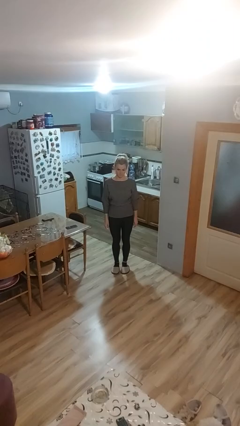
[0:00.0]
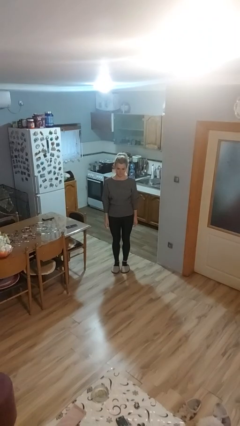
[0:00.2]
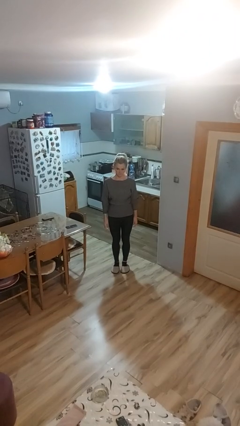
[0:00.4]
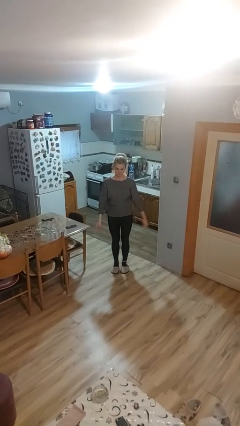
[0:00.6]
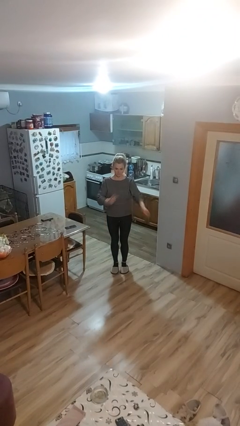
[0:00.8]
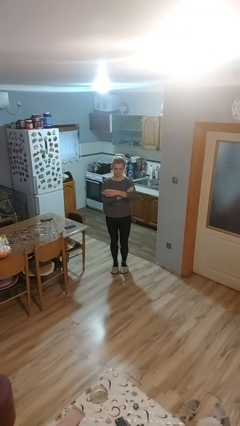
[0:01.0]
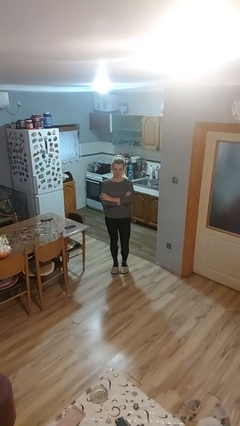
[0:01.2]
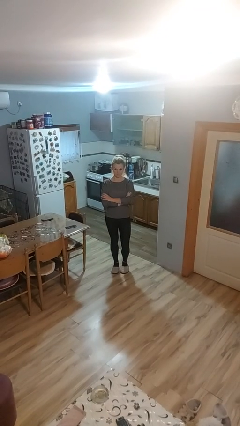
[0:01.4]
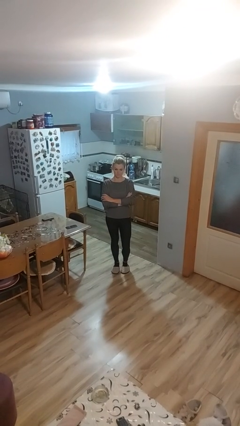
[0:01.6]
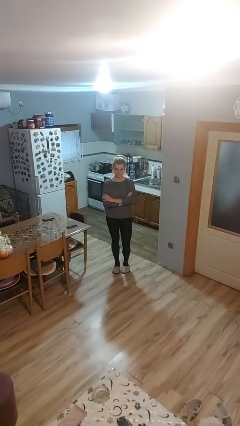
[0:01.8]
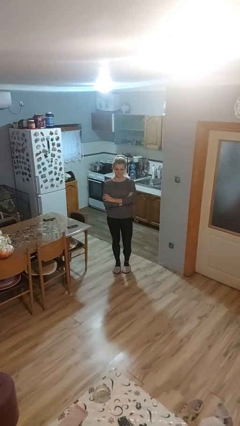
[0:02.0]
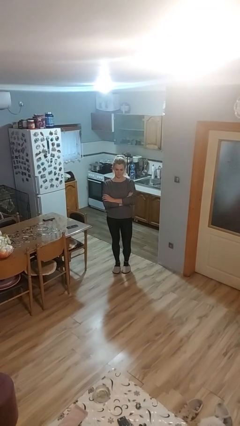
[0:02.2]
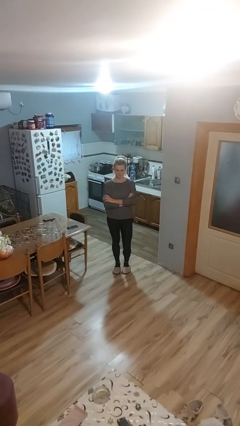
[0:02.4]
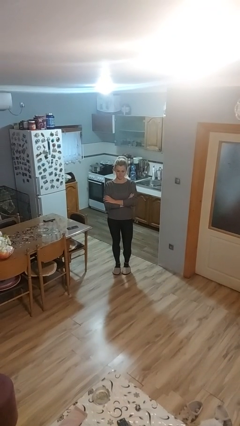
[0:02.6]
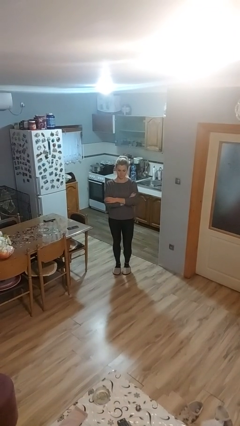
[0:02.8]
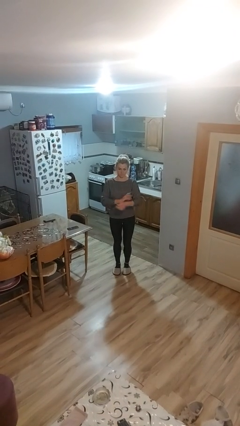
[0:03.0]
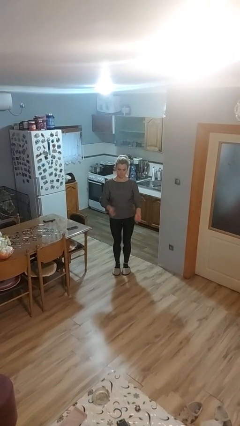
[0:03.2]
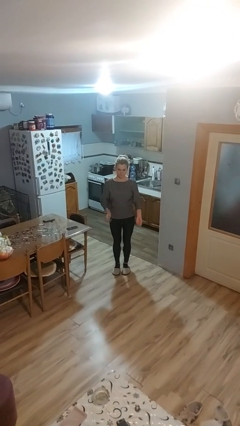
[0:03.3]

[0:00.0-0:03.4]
person crosses arms

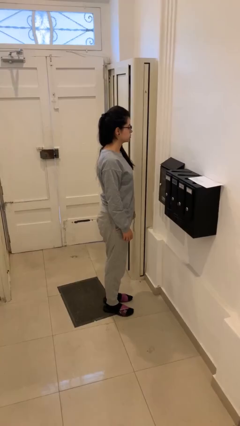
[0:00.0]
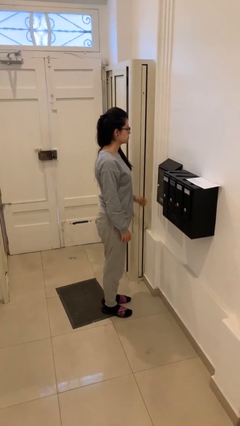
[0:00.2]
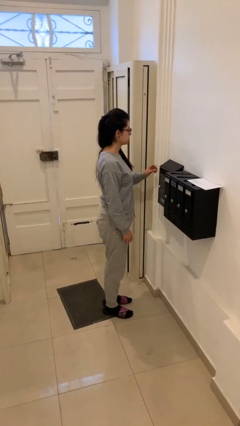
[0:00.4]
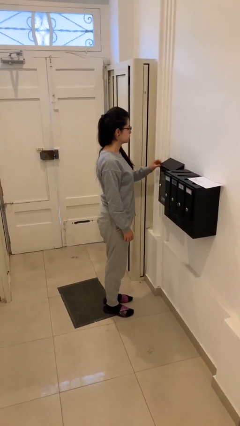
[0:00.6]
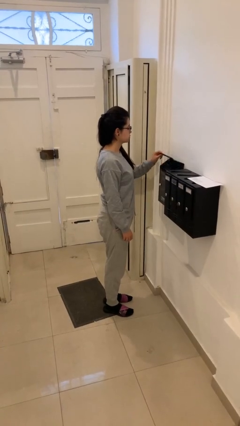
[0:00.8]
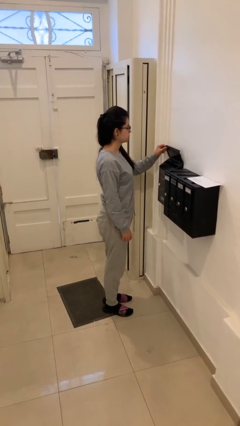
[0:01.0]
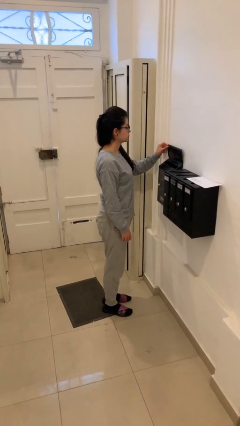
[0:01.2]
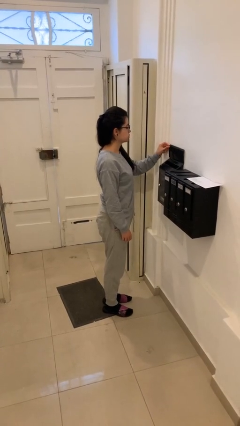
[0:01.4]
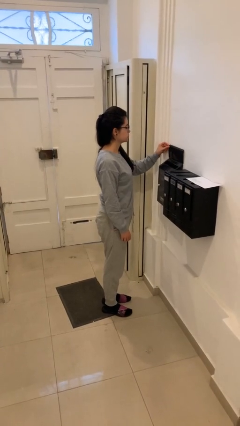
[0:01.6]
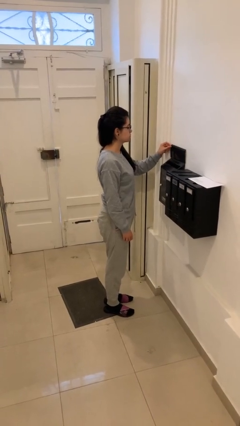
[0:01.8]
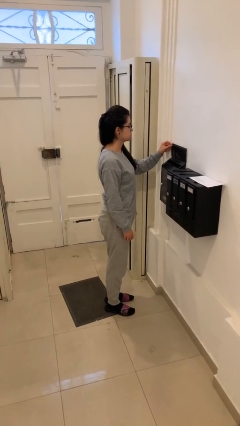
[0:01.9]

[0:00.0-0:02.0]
person opens mailbox

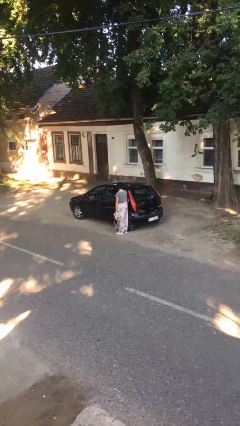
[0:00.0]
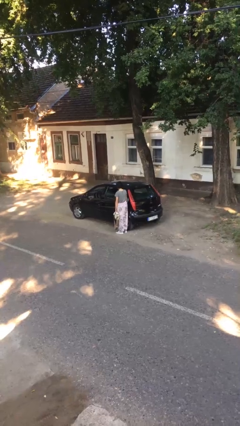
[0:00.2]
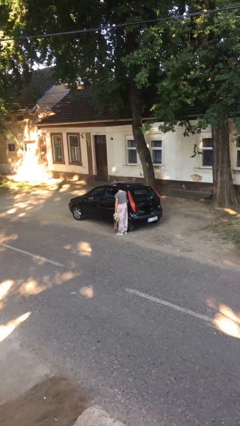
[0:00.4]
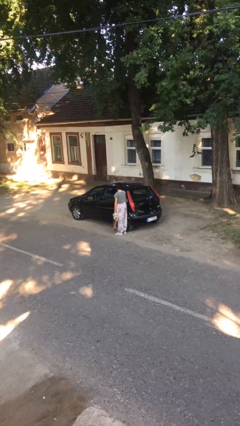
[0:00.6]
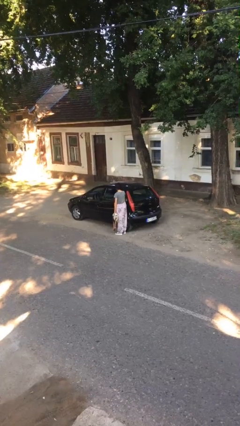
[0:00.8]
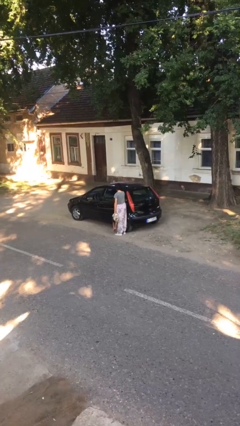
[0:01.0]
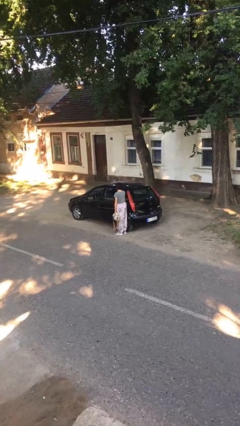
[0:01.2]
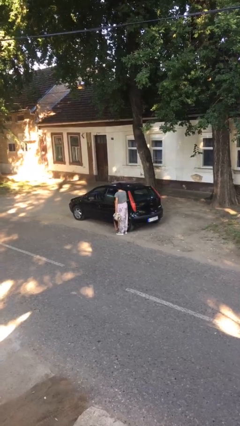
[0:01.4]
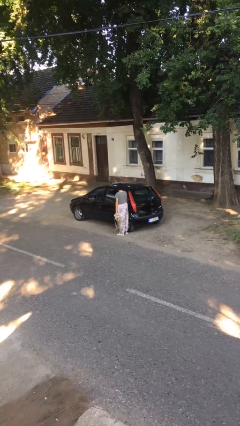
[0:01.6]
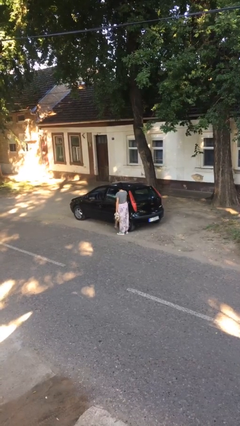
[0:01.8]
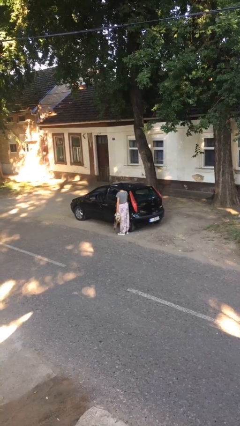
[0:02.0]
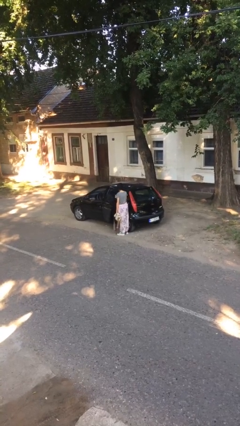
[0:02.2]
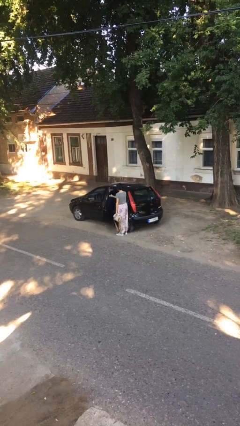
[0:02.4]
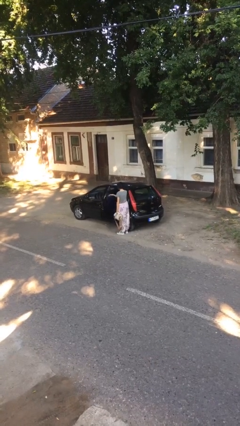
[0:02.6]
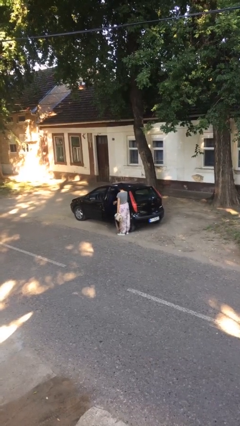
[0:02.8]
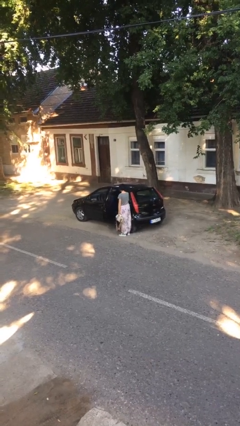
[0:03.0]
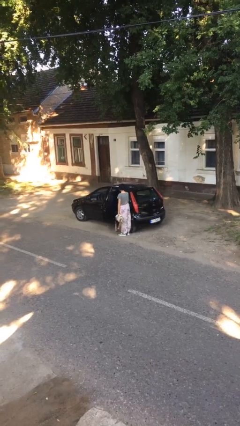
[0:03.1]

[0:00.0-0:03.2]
person opens car door

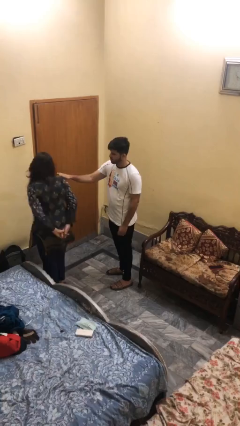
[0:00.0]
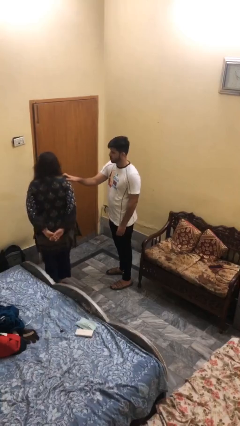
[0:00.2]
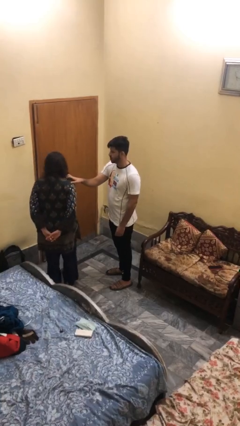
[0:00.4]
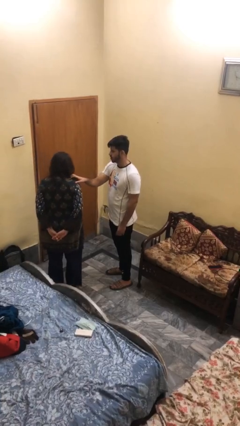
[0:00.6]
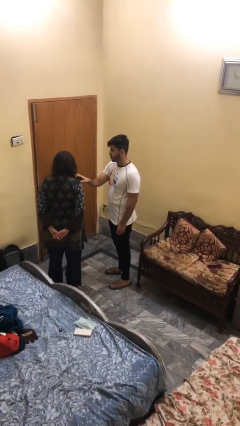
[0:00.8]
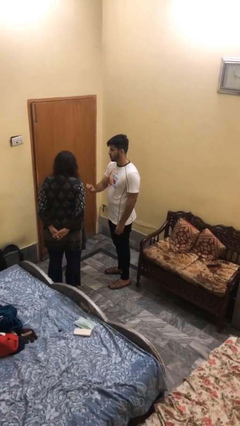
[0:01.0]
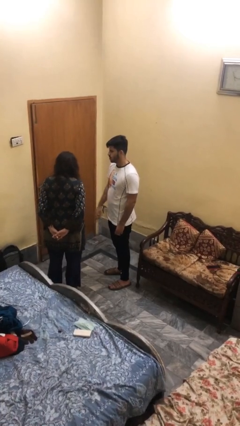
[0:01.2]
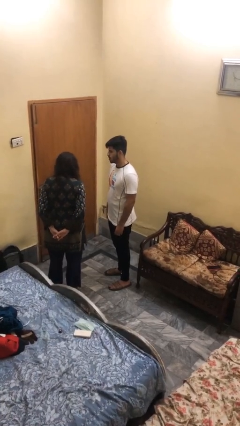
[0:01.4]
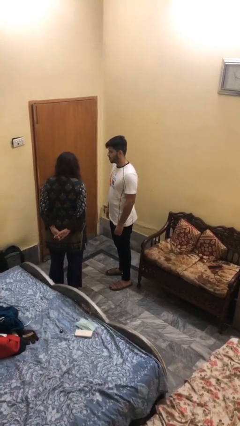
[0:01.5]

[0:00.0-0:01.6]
person spins person around

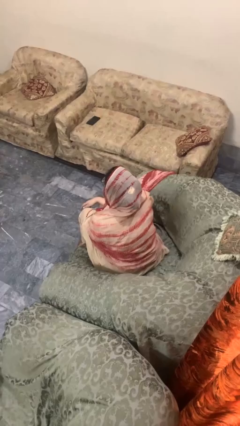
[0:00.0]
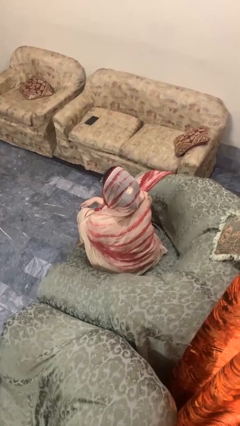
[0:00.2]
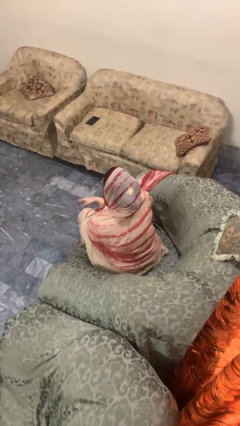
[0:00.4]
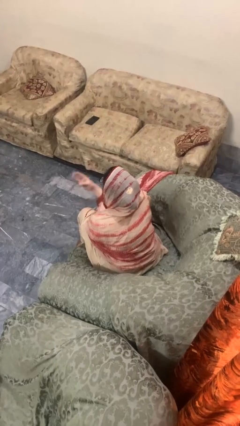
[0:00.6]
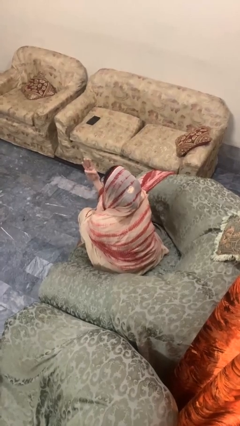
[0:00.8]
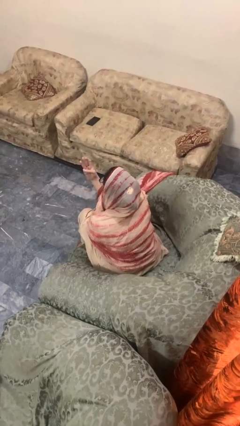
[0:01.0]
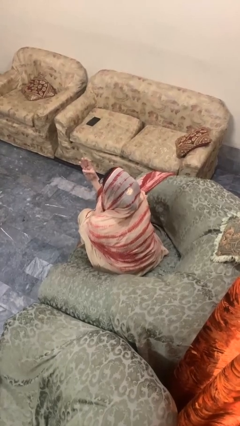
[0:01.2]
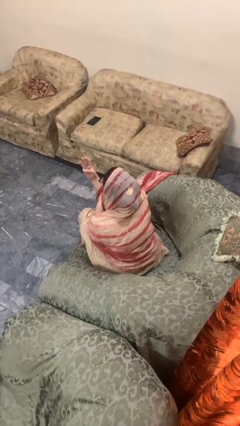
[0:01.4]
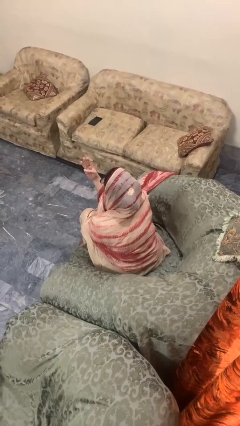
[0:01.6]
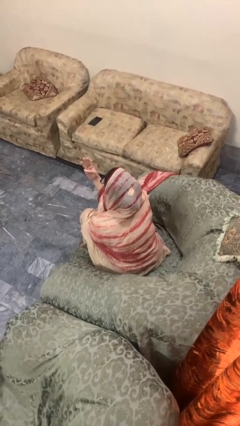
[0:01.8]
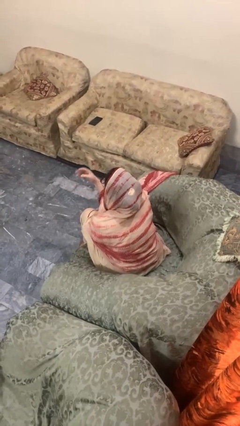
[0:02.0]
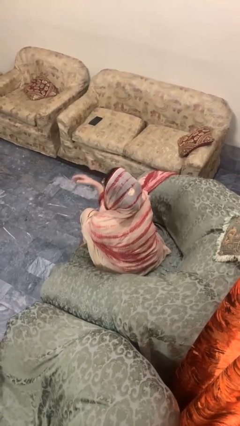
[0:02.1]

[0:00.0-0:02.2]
person gestures number three

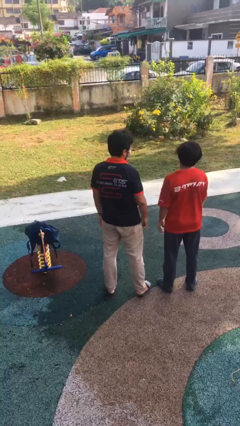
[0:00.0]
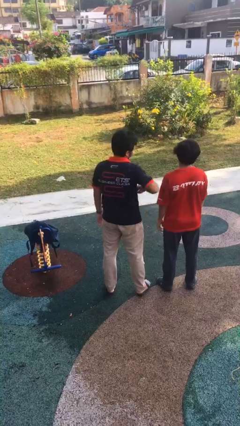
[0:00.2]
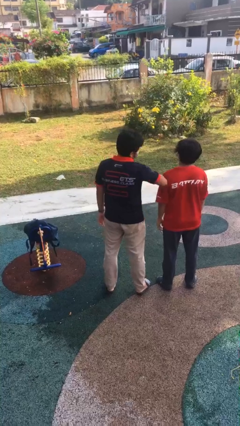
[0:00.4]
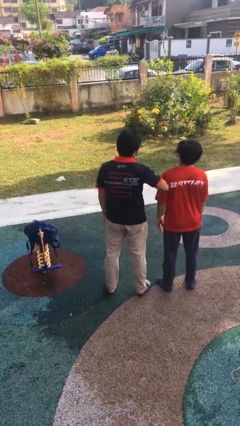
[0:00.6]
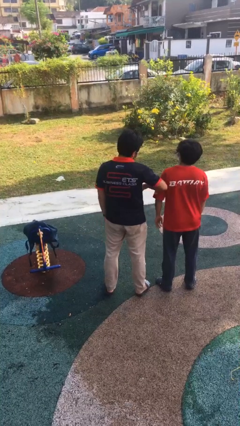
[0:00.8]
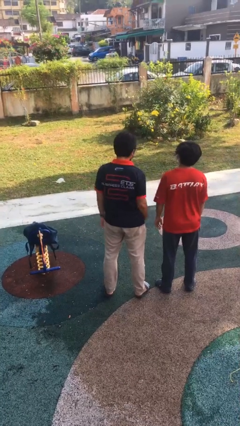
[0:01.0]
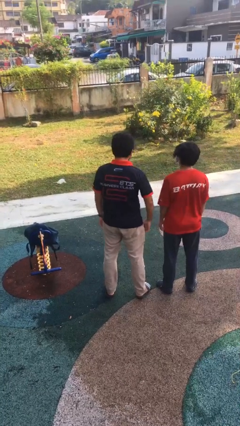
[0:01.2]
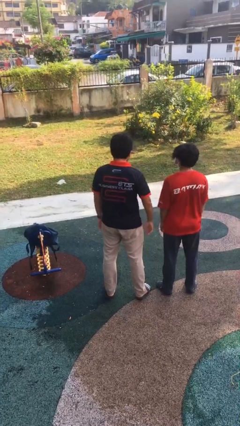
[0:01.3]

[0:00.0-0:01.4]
person nudges person with elbow

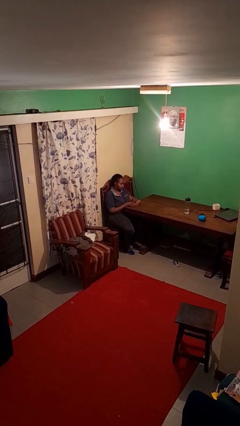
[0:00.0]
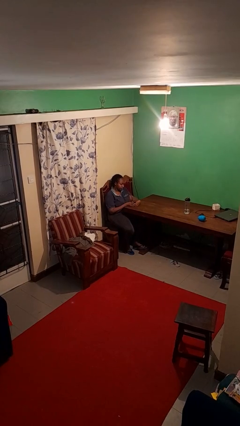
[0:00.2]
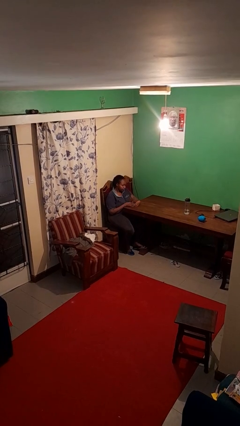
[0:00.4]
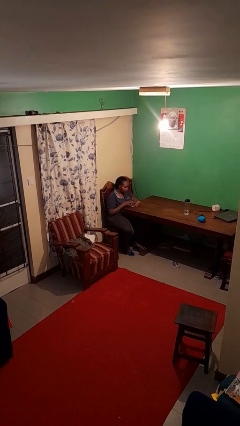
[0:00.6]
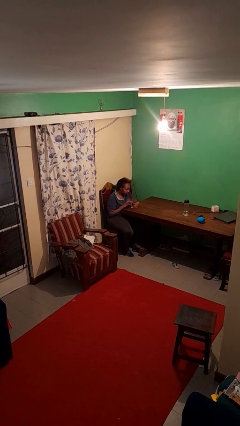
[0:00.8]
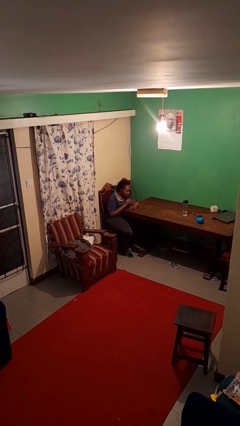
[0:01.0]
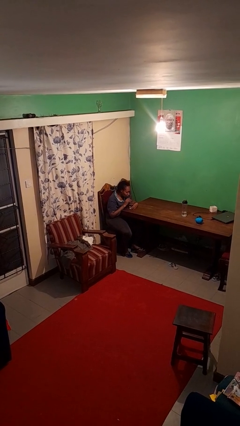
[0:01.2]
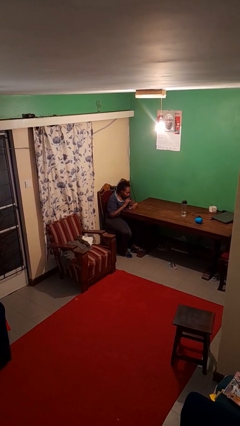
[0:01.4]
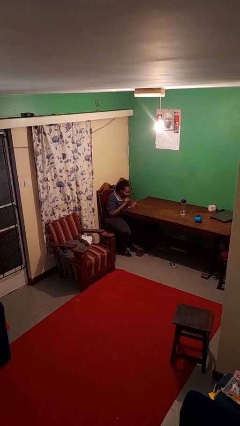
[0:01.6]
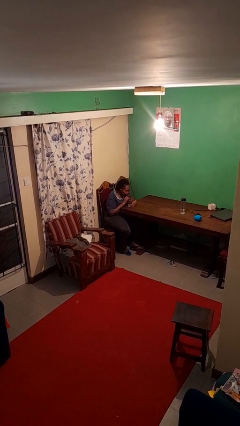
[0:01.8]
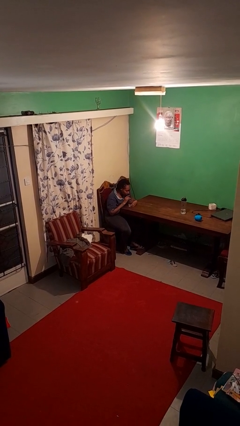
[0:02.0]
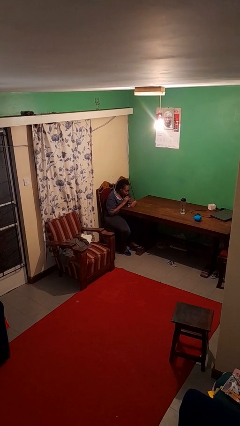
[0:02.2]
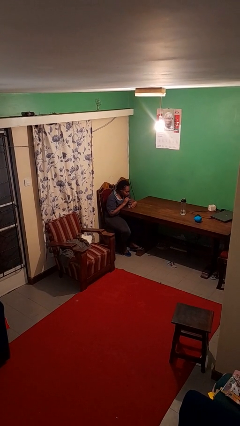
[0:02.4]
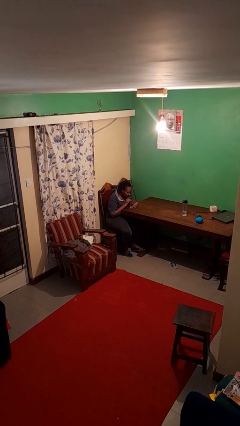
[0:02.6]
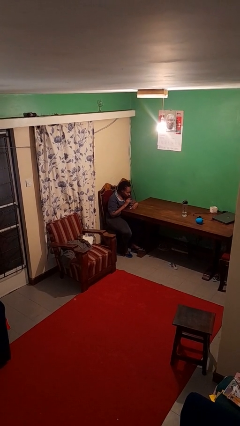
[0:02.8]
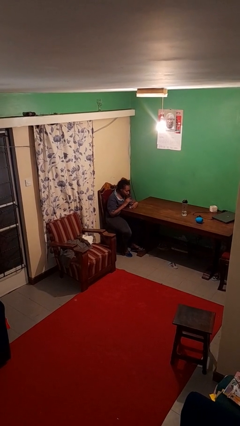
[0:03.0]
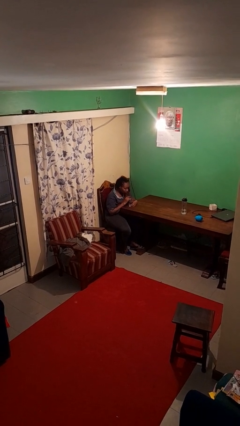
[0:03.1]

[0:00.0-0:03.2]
person drinks from straw

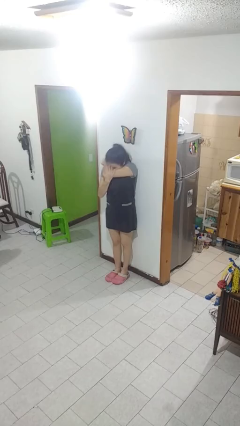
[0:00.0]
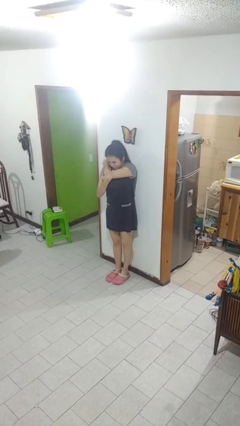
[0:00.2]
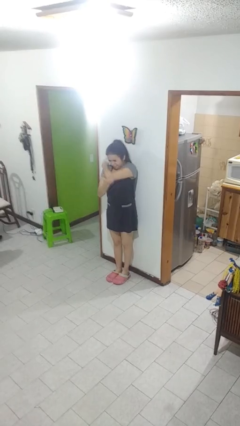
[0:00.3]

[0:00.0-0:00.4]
person sneezes into arm
